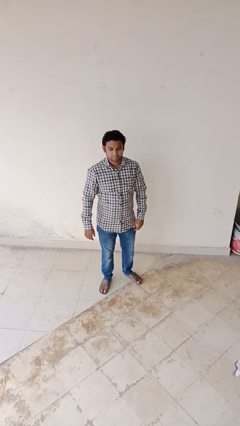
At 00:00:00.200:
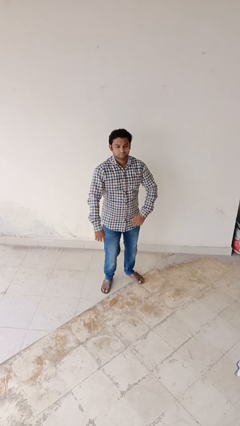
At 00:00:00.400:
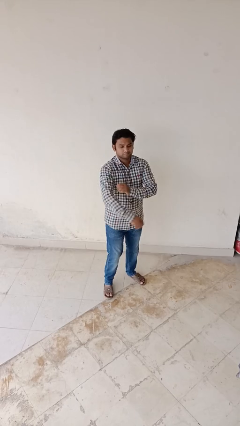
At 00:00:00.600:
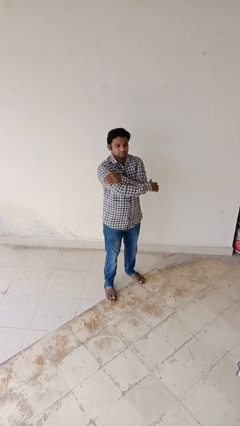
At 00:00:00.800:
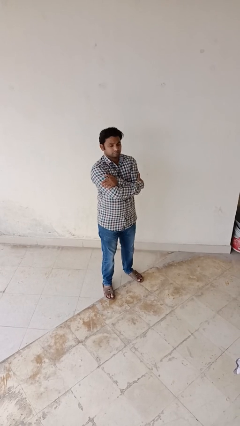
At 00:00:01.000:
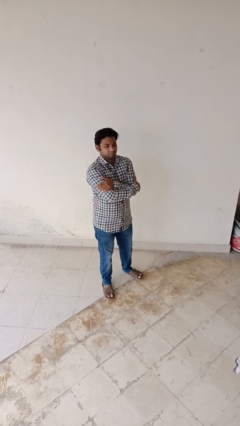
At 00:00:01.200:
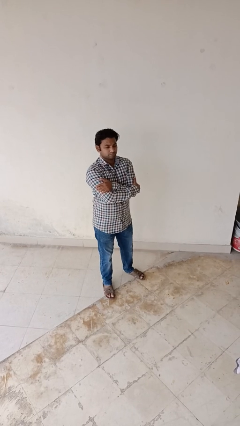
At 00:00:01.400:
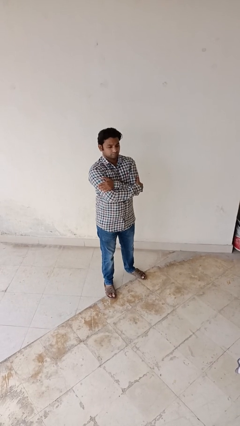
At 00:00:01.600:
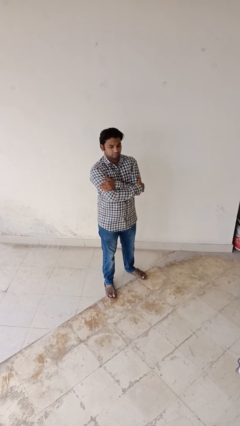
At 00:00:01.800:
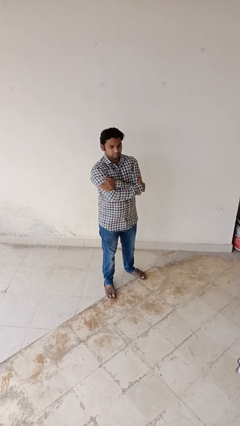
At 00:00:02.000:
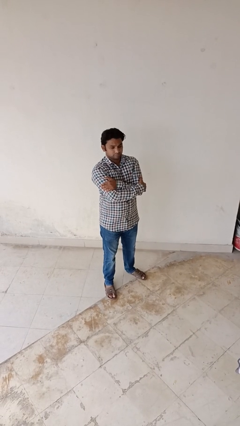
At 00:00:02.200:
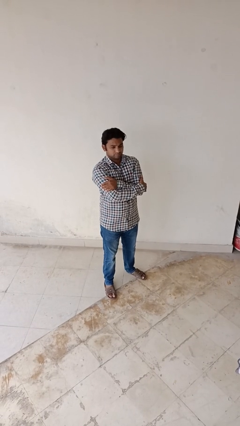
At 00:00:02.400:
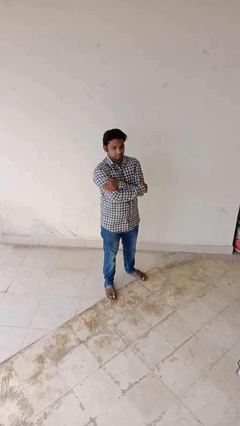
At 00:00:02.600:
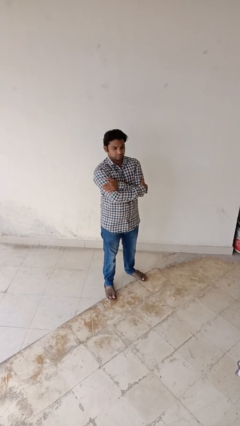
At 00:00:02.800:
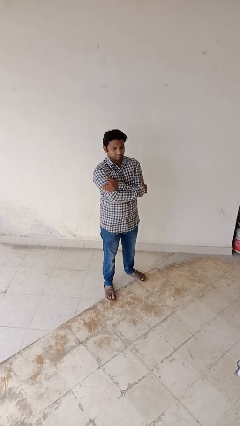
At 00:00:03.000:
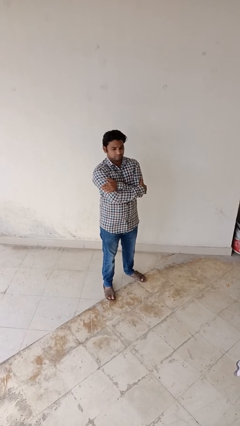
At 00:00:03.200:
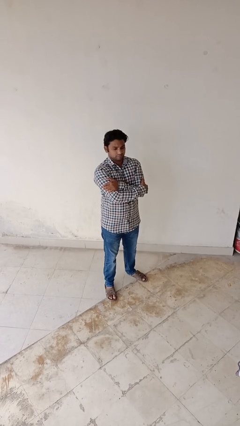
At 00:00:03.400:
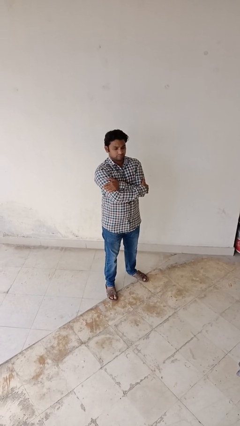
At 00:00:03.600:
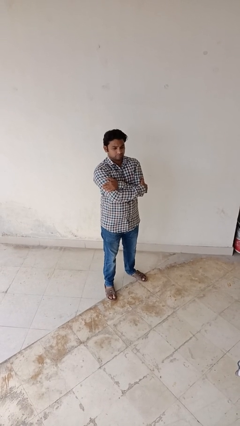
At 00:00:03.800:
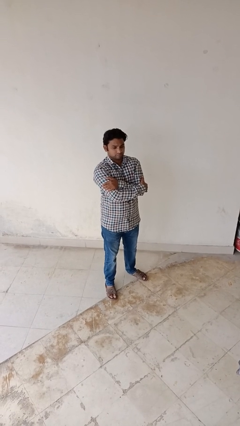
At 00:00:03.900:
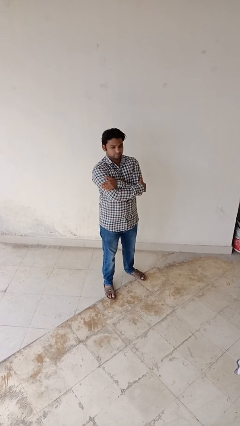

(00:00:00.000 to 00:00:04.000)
person gestures arms x

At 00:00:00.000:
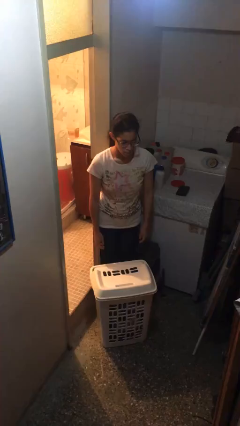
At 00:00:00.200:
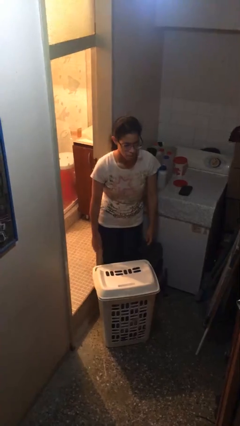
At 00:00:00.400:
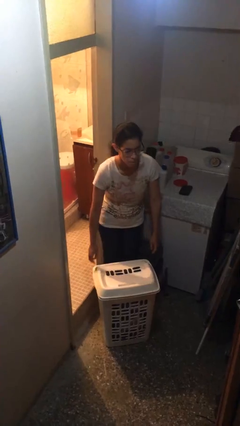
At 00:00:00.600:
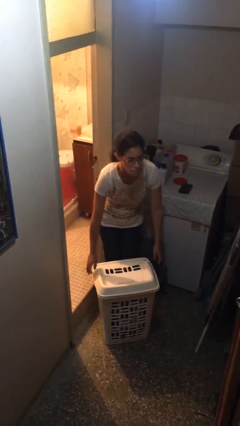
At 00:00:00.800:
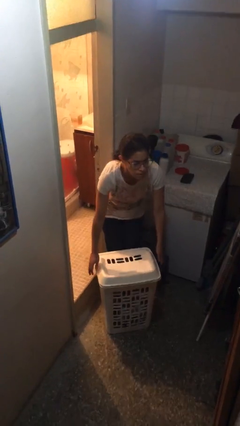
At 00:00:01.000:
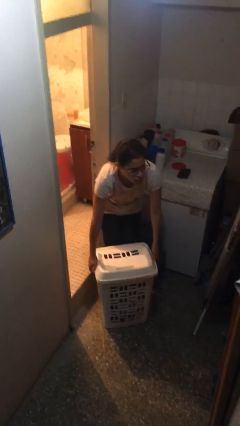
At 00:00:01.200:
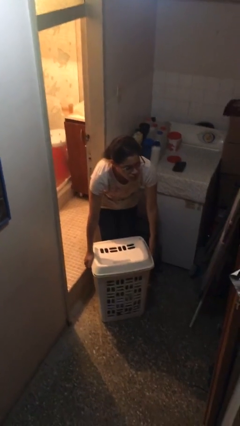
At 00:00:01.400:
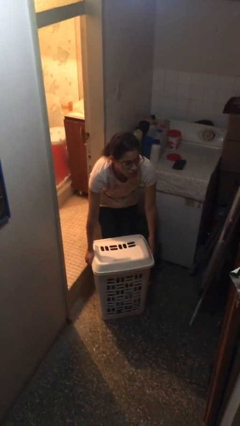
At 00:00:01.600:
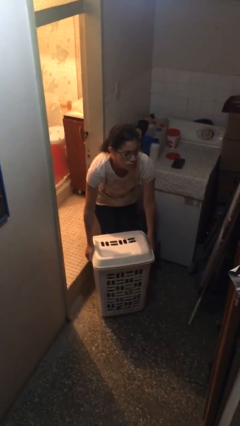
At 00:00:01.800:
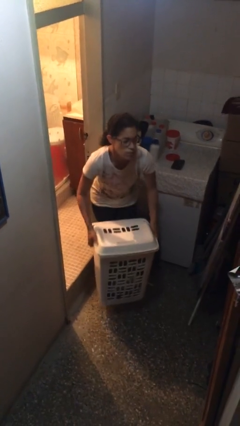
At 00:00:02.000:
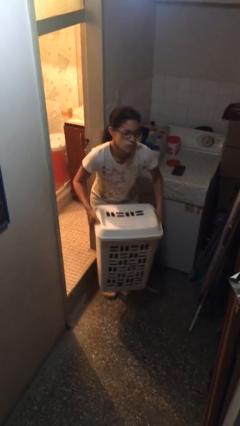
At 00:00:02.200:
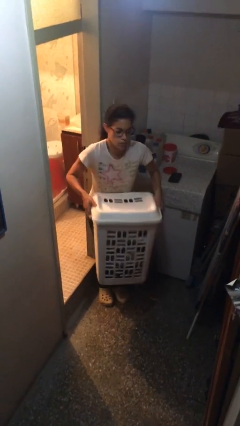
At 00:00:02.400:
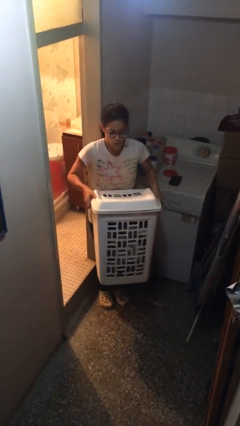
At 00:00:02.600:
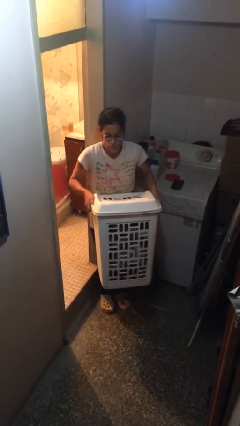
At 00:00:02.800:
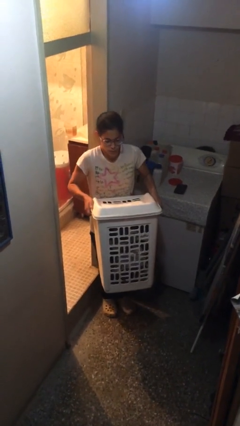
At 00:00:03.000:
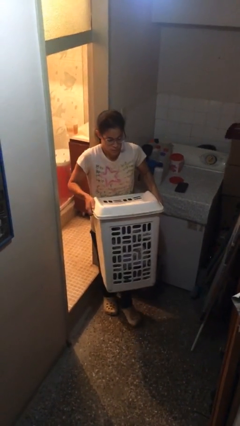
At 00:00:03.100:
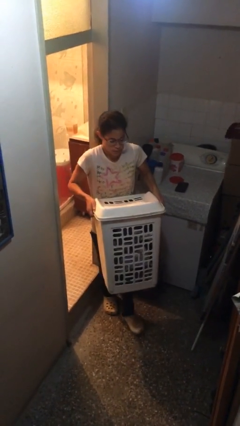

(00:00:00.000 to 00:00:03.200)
person picks up object from floor

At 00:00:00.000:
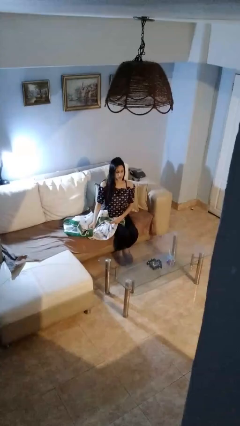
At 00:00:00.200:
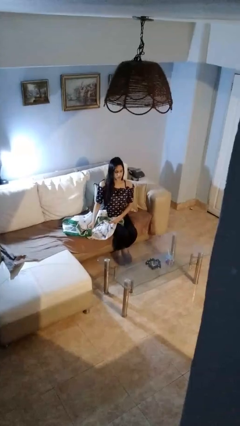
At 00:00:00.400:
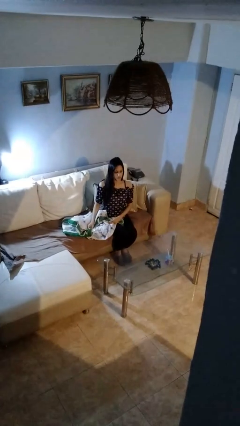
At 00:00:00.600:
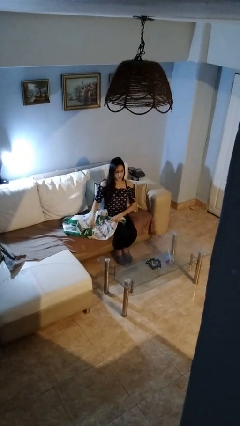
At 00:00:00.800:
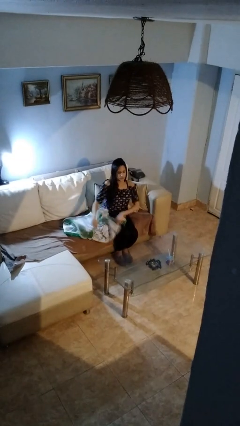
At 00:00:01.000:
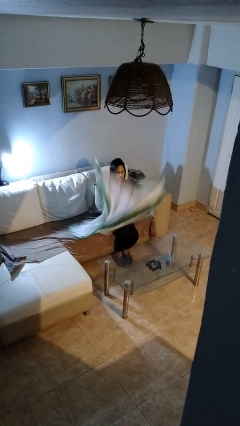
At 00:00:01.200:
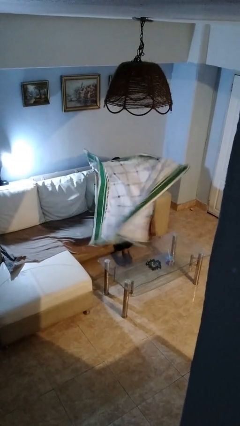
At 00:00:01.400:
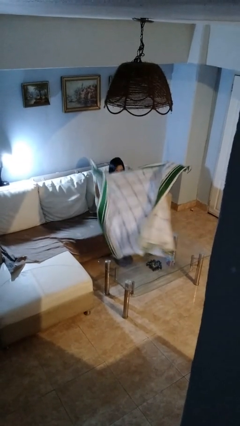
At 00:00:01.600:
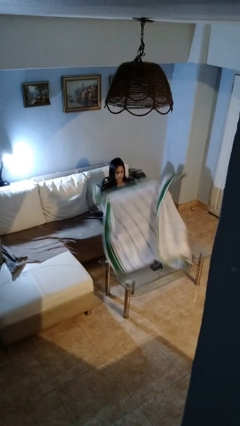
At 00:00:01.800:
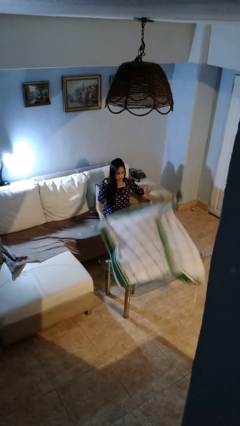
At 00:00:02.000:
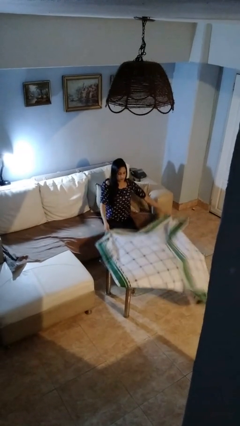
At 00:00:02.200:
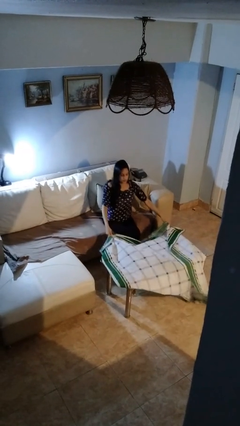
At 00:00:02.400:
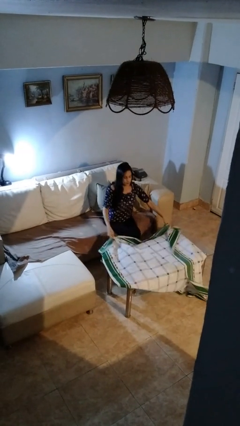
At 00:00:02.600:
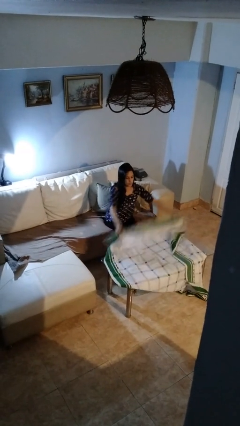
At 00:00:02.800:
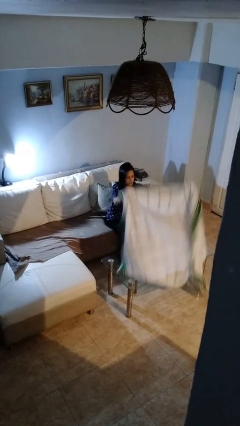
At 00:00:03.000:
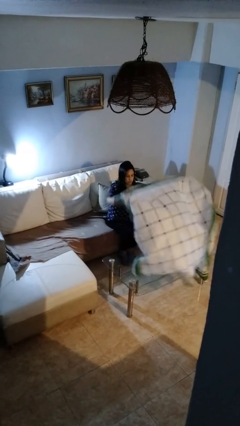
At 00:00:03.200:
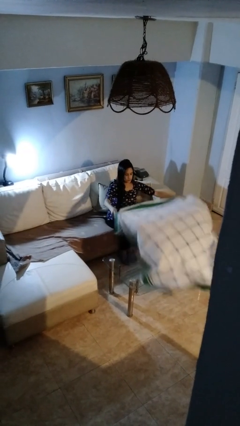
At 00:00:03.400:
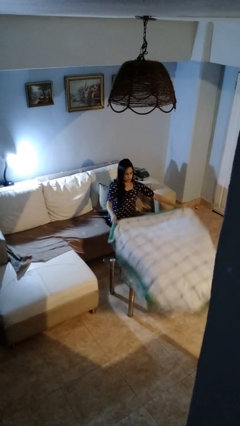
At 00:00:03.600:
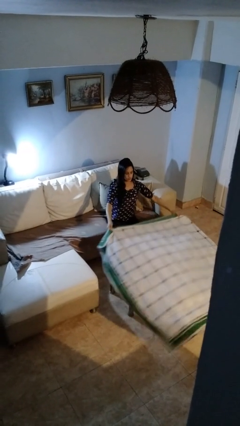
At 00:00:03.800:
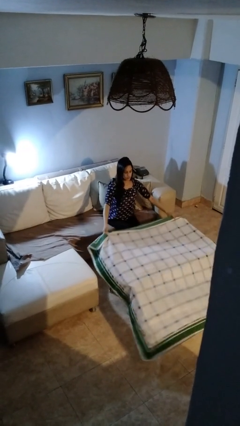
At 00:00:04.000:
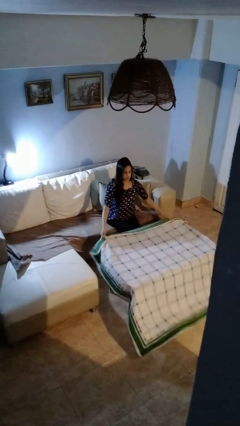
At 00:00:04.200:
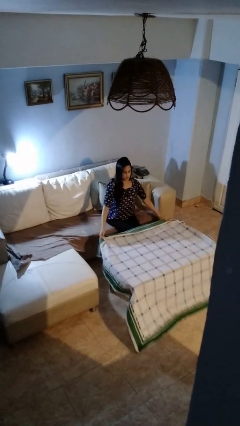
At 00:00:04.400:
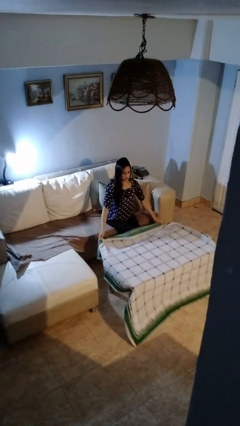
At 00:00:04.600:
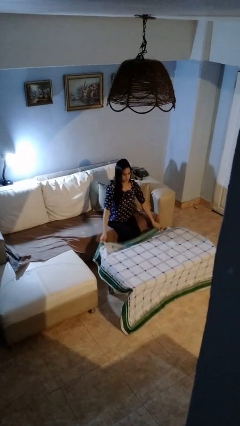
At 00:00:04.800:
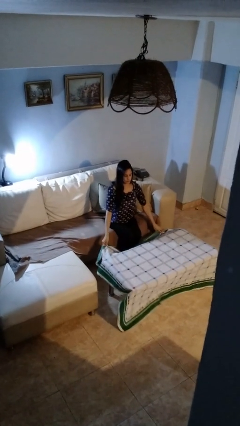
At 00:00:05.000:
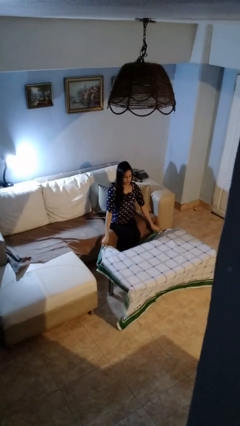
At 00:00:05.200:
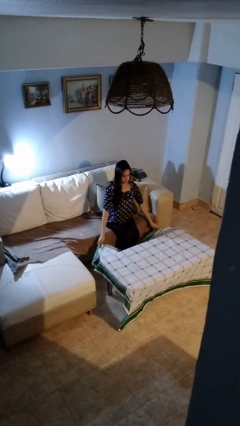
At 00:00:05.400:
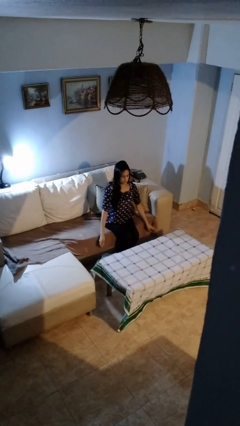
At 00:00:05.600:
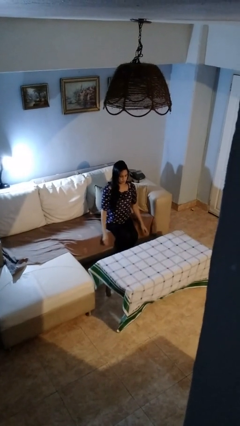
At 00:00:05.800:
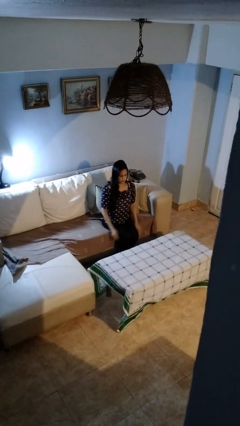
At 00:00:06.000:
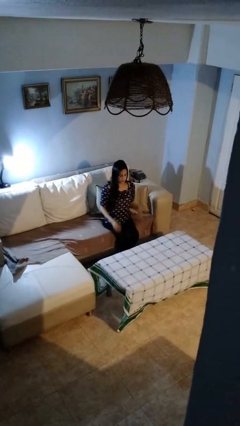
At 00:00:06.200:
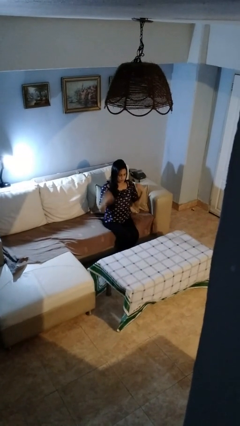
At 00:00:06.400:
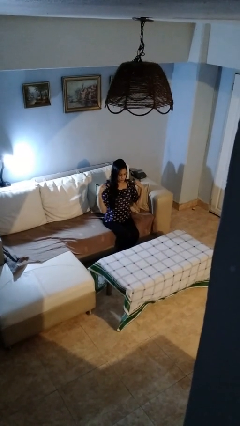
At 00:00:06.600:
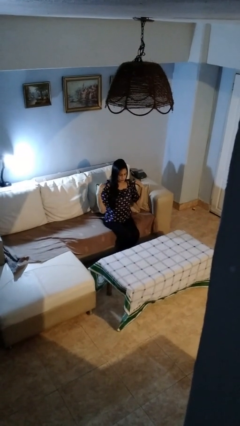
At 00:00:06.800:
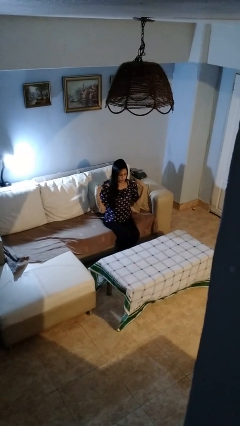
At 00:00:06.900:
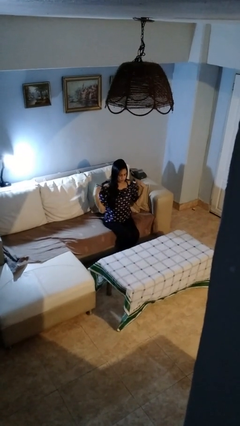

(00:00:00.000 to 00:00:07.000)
person spreads tablecloth

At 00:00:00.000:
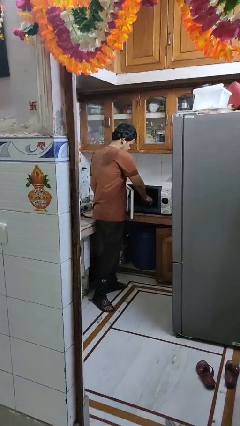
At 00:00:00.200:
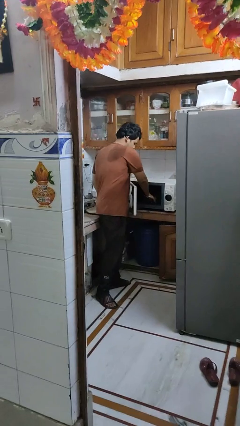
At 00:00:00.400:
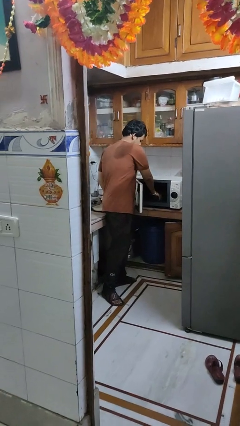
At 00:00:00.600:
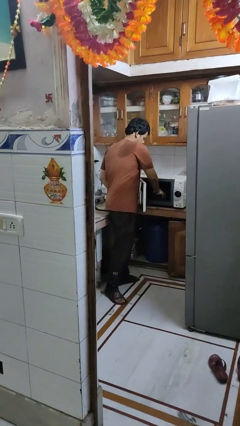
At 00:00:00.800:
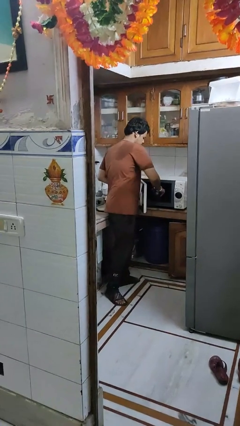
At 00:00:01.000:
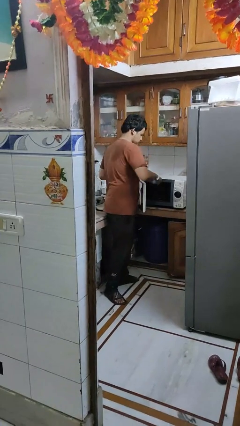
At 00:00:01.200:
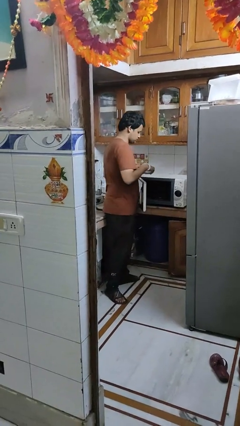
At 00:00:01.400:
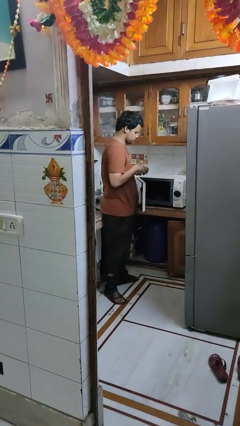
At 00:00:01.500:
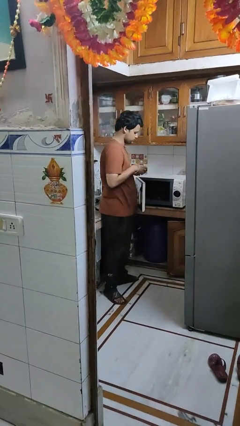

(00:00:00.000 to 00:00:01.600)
person takes object from microwave

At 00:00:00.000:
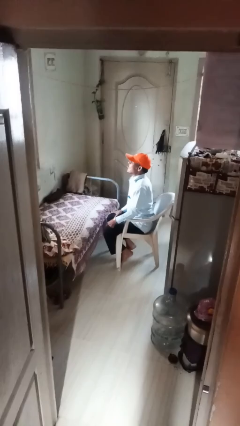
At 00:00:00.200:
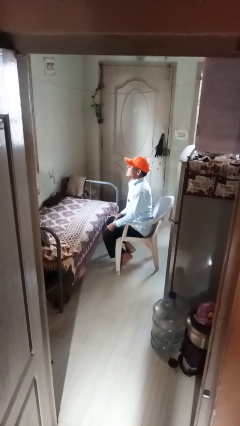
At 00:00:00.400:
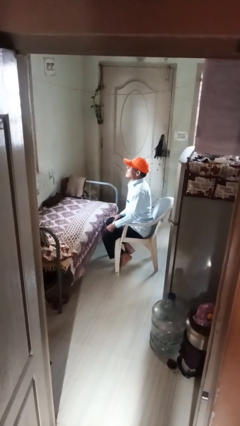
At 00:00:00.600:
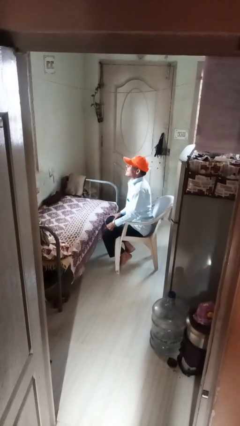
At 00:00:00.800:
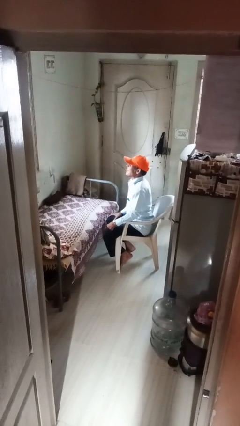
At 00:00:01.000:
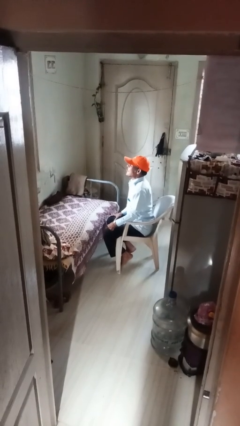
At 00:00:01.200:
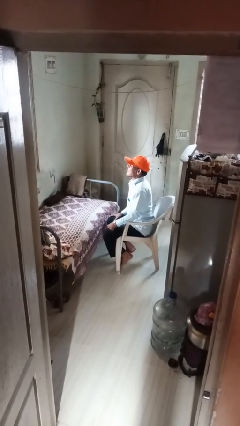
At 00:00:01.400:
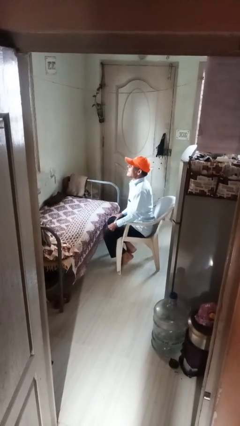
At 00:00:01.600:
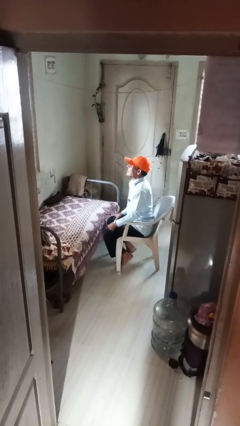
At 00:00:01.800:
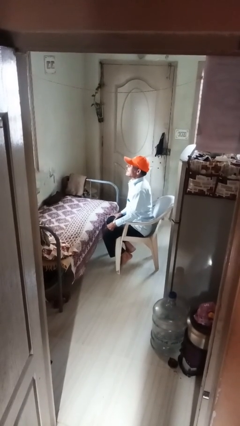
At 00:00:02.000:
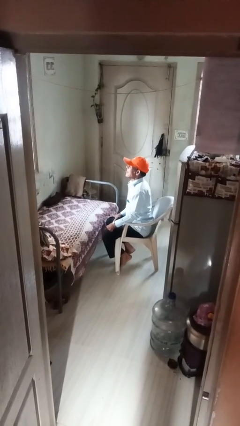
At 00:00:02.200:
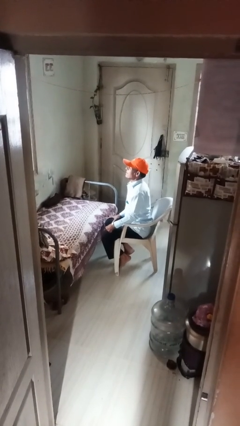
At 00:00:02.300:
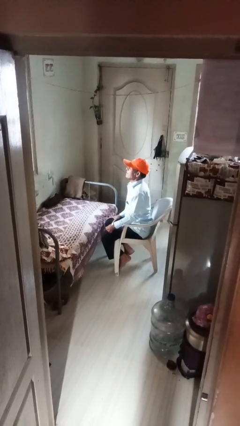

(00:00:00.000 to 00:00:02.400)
person sticks out tongue
